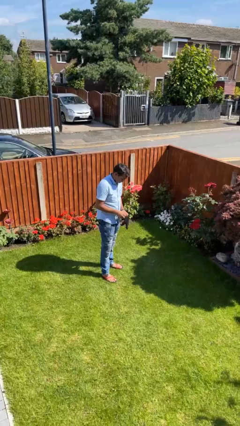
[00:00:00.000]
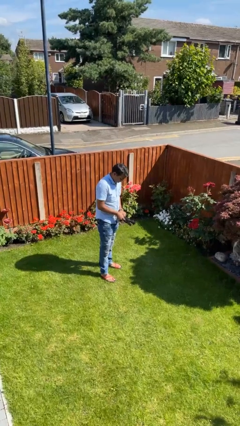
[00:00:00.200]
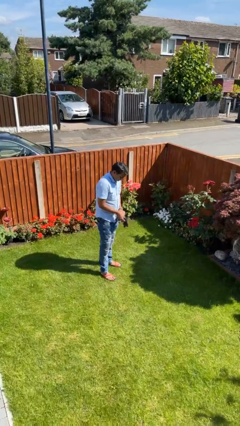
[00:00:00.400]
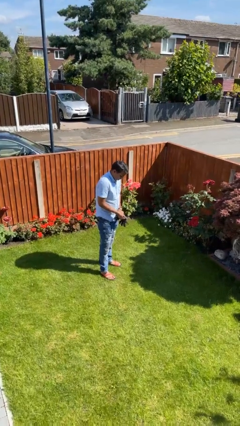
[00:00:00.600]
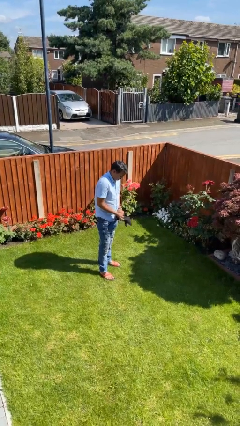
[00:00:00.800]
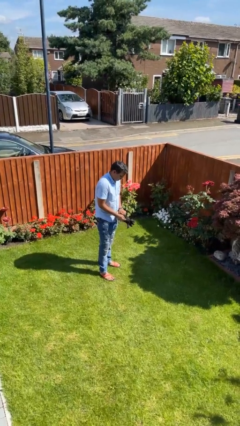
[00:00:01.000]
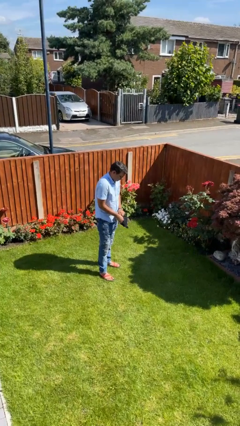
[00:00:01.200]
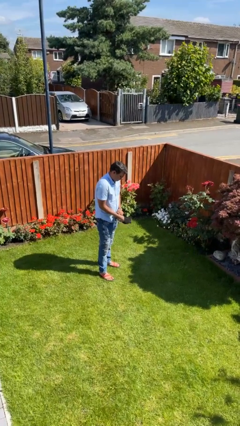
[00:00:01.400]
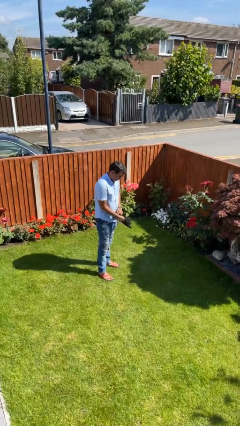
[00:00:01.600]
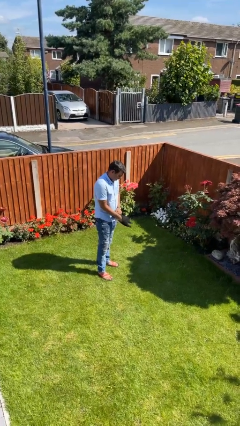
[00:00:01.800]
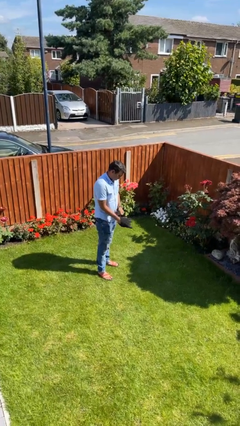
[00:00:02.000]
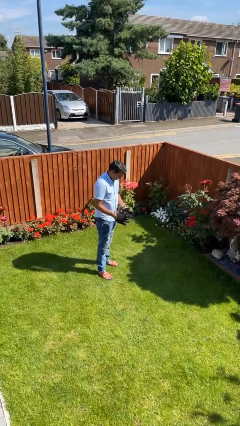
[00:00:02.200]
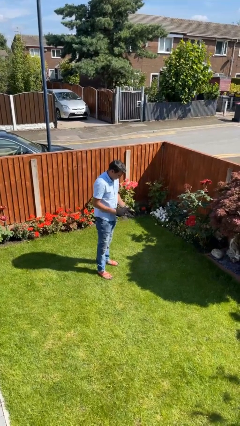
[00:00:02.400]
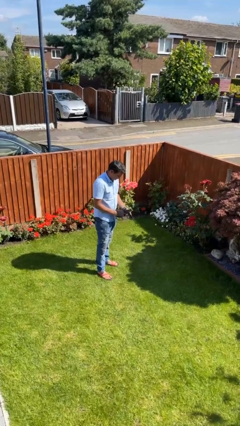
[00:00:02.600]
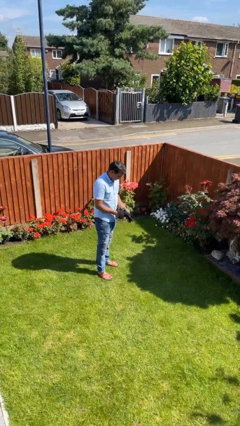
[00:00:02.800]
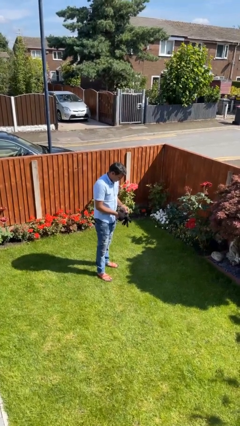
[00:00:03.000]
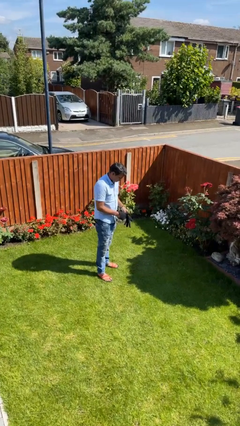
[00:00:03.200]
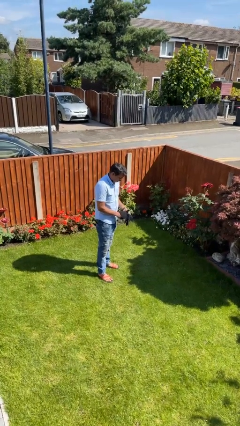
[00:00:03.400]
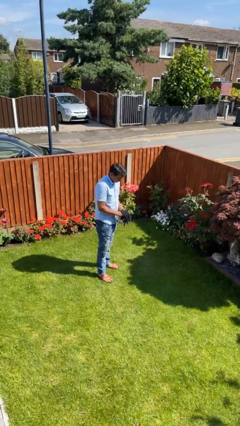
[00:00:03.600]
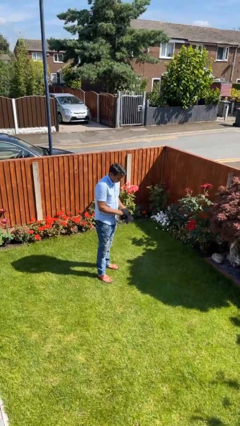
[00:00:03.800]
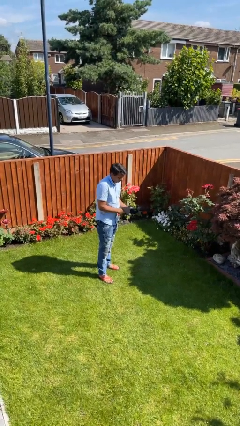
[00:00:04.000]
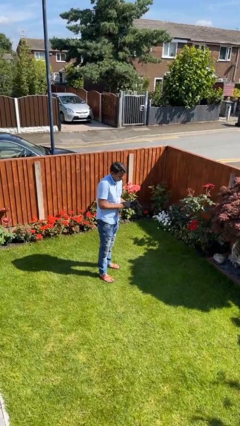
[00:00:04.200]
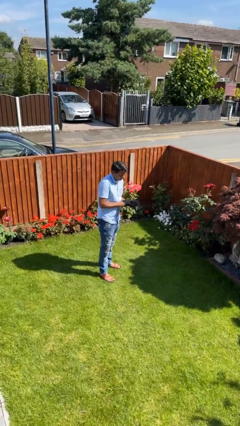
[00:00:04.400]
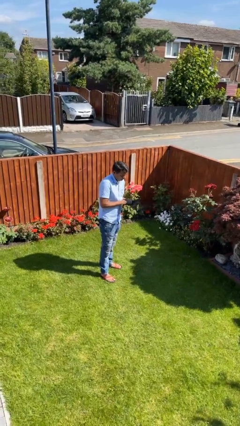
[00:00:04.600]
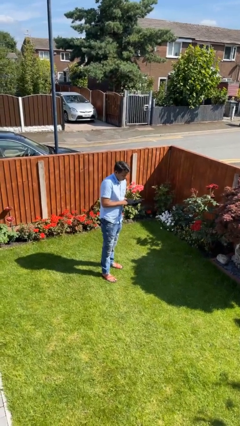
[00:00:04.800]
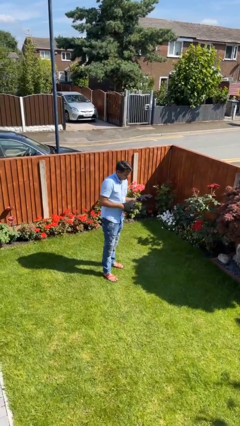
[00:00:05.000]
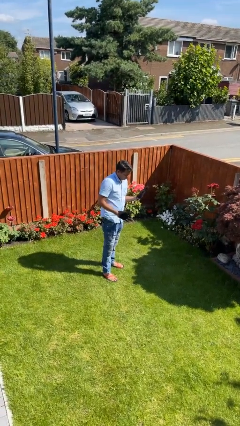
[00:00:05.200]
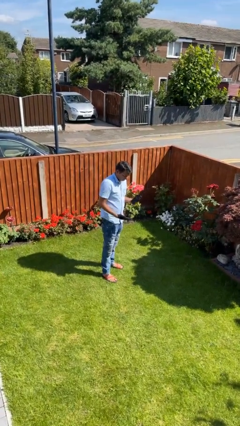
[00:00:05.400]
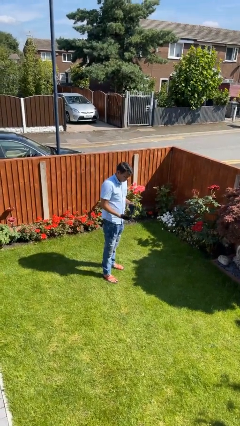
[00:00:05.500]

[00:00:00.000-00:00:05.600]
person puts on gloves

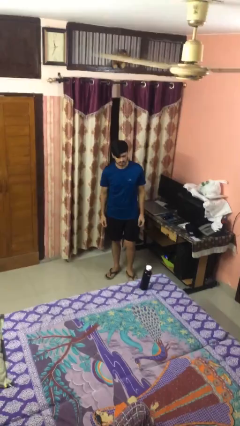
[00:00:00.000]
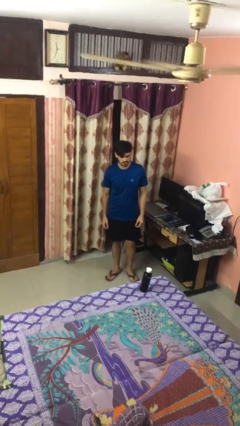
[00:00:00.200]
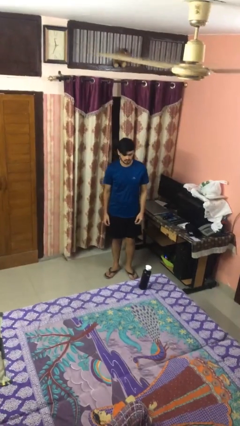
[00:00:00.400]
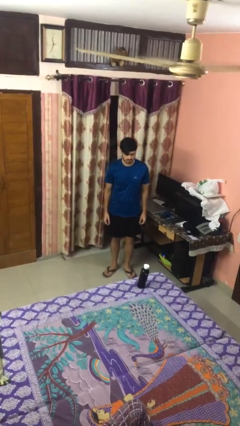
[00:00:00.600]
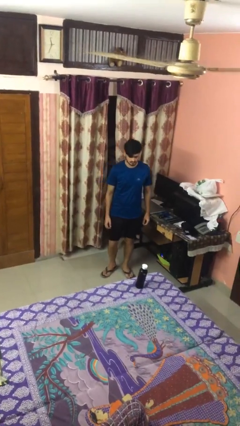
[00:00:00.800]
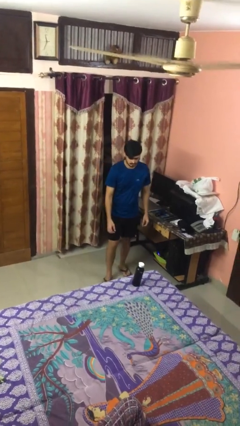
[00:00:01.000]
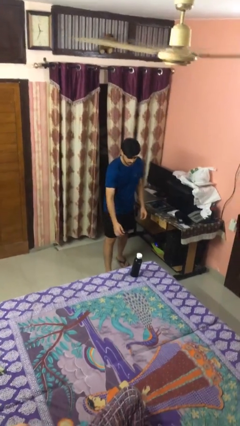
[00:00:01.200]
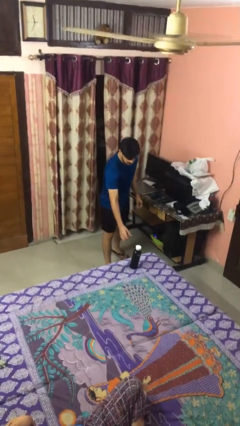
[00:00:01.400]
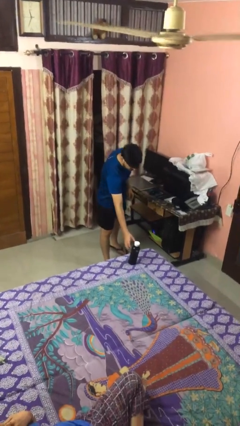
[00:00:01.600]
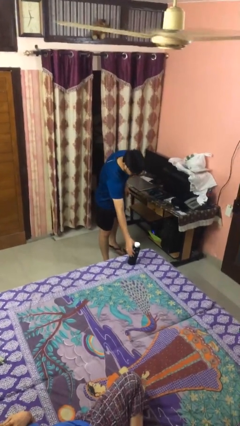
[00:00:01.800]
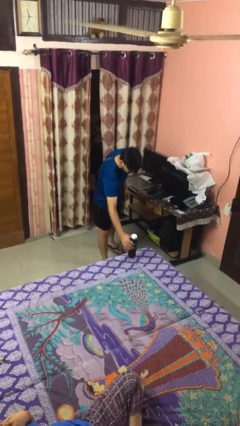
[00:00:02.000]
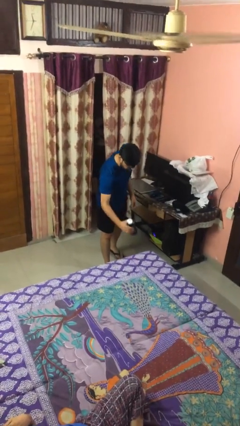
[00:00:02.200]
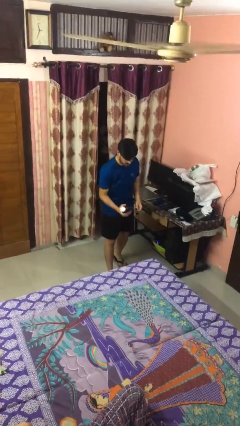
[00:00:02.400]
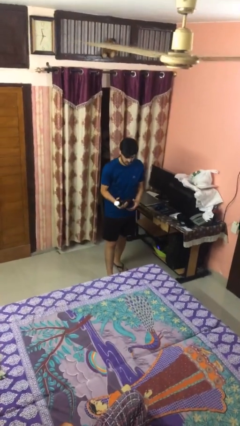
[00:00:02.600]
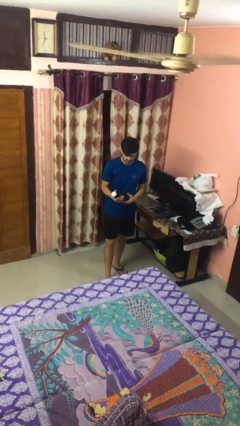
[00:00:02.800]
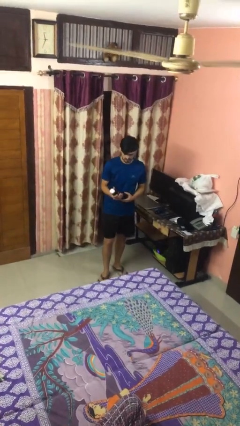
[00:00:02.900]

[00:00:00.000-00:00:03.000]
person picks up object from bed

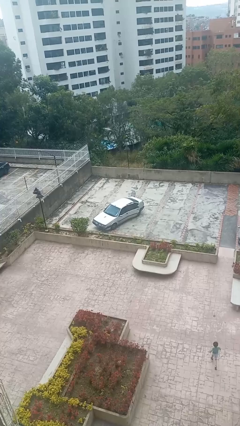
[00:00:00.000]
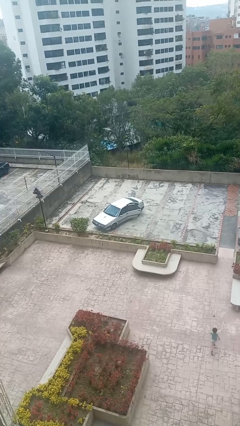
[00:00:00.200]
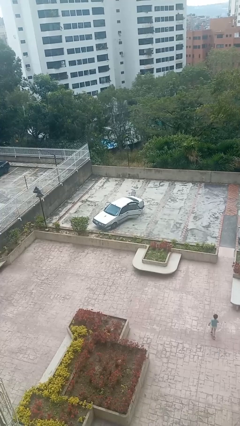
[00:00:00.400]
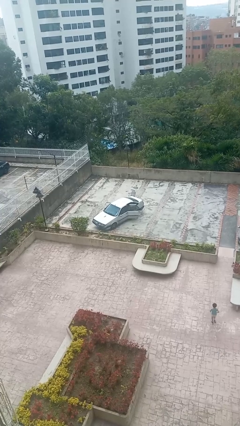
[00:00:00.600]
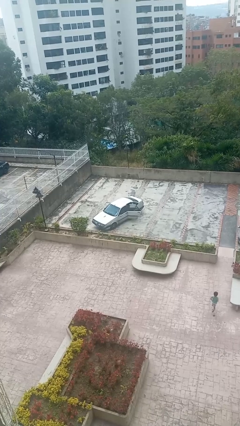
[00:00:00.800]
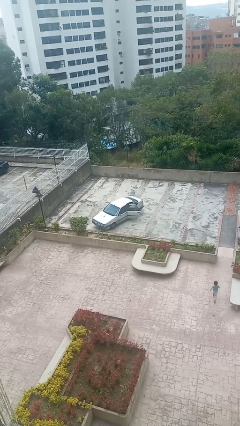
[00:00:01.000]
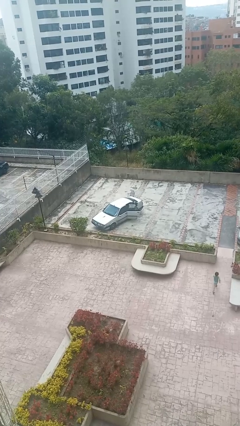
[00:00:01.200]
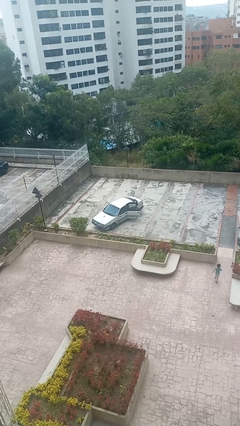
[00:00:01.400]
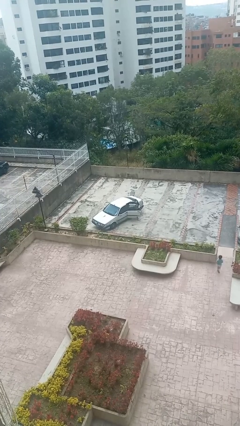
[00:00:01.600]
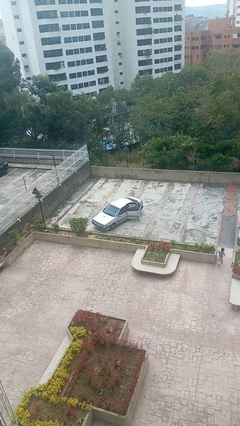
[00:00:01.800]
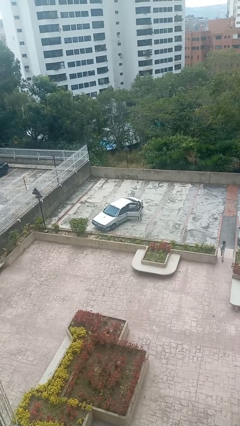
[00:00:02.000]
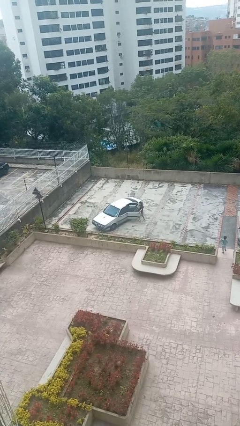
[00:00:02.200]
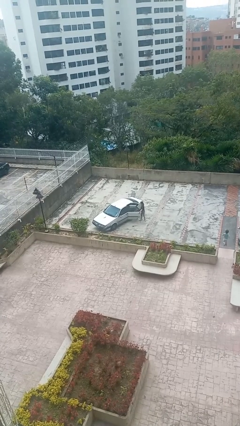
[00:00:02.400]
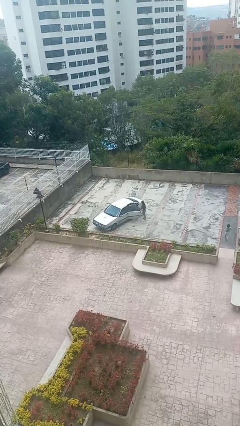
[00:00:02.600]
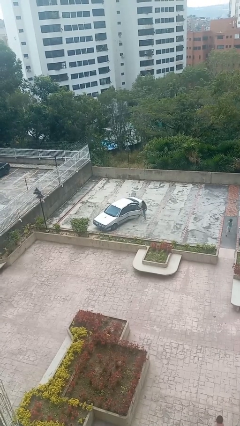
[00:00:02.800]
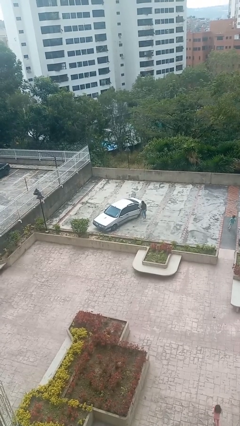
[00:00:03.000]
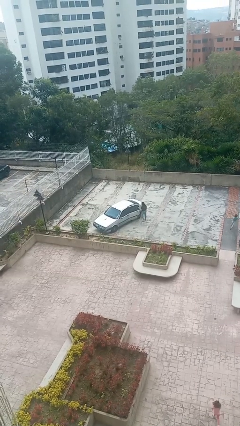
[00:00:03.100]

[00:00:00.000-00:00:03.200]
car drops off person

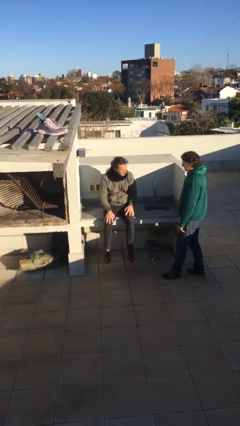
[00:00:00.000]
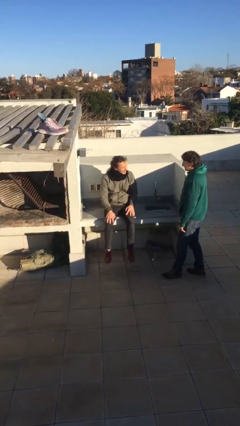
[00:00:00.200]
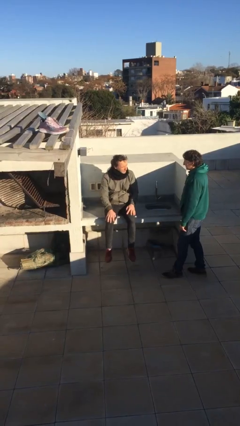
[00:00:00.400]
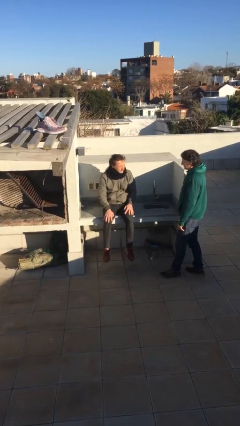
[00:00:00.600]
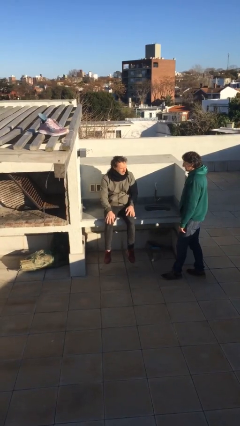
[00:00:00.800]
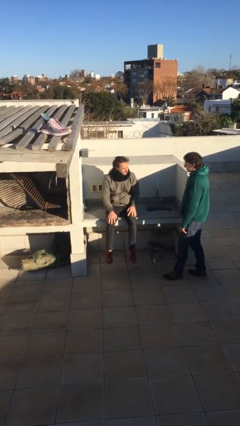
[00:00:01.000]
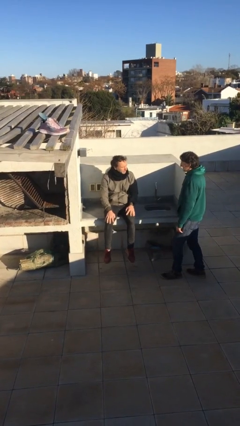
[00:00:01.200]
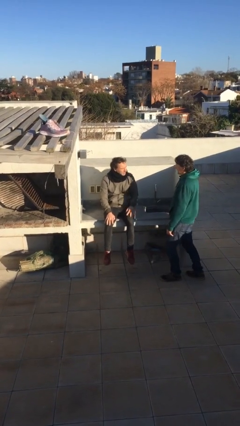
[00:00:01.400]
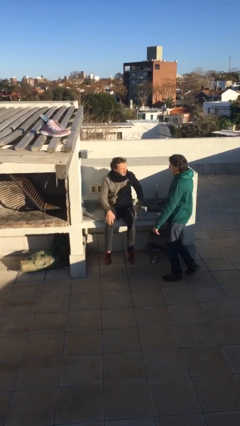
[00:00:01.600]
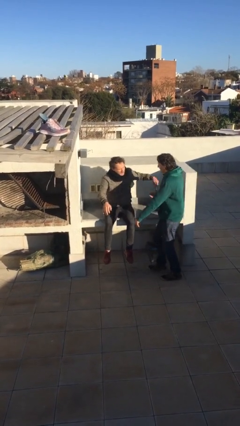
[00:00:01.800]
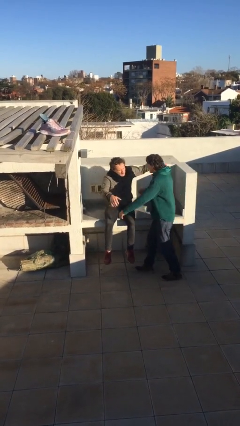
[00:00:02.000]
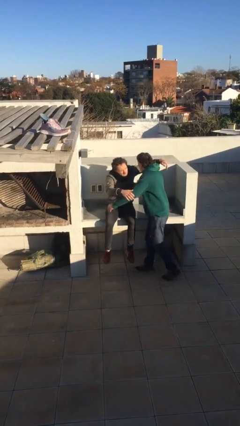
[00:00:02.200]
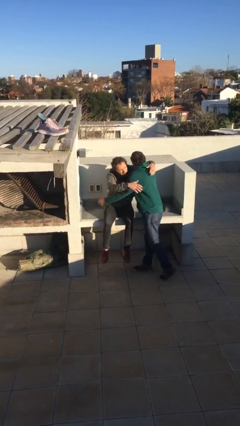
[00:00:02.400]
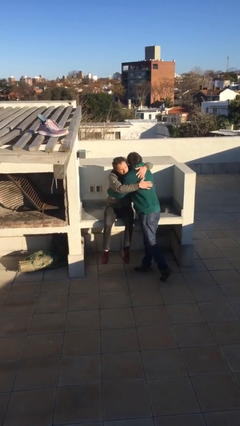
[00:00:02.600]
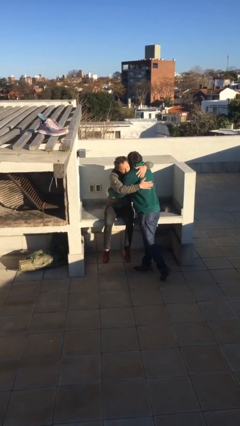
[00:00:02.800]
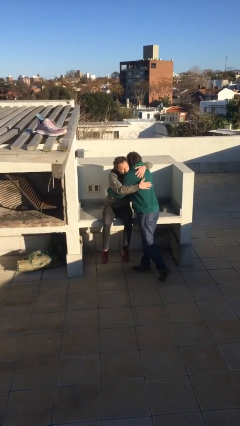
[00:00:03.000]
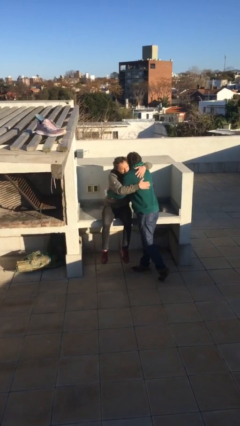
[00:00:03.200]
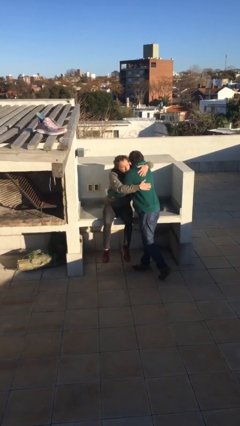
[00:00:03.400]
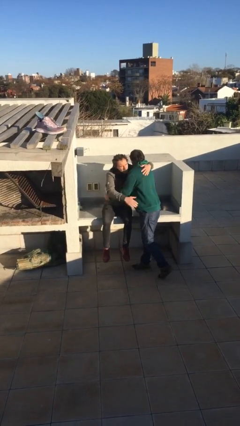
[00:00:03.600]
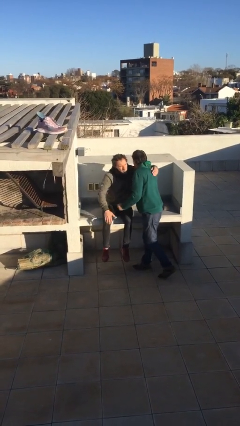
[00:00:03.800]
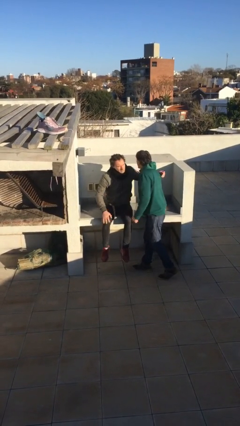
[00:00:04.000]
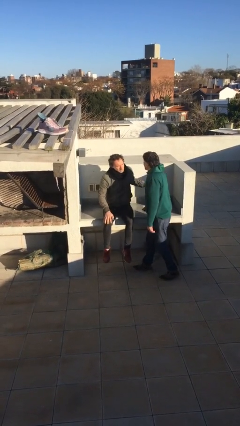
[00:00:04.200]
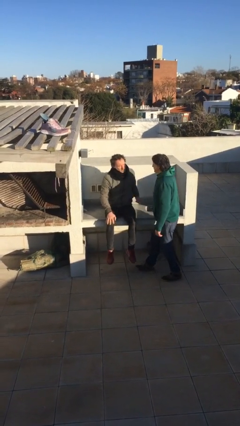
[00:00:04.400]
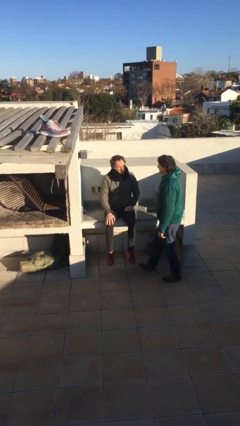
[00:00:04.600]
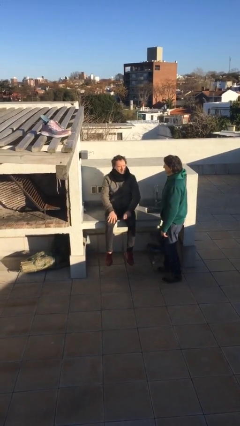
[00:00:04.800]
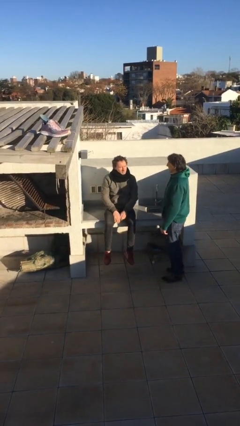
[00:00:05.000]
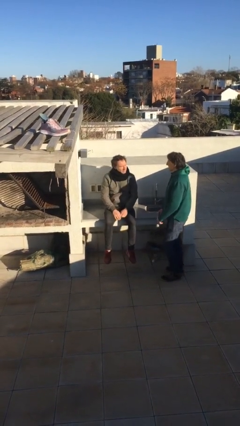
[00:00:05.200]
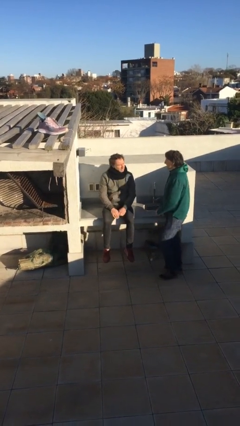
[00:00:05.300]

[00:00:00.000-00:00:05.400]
person embraces person

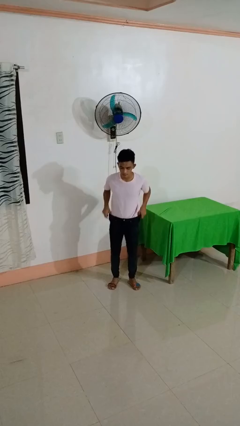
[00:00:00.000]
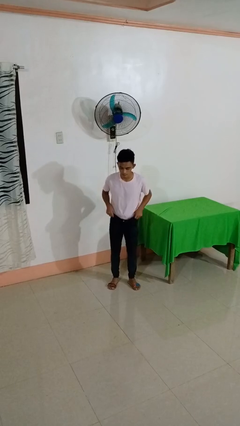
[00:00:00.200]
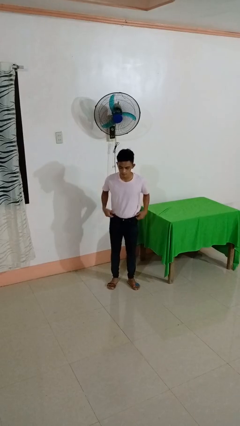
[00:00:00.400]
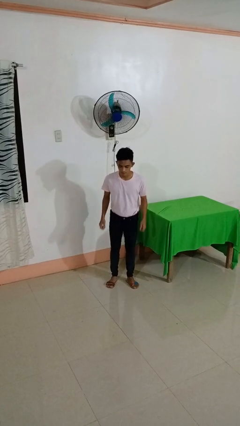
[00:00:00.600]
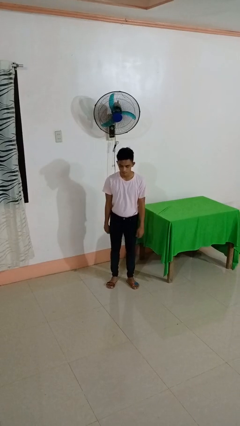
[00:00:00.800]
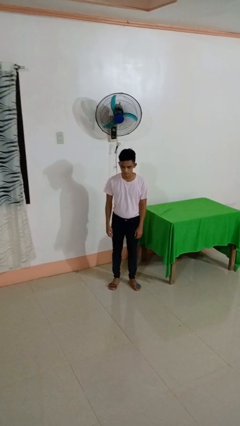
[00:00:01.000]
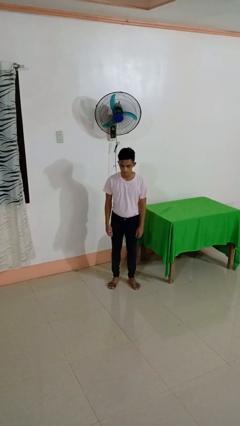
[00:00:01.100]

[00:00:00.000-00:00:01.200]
person hikes up pants
